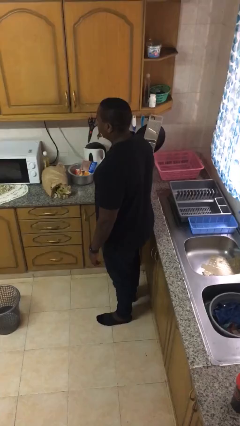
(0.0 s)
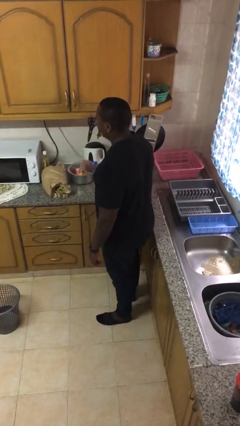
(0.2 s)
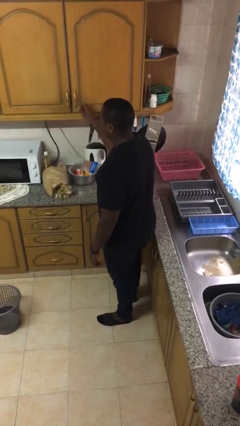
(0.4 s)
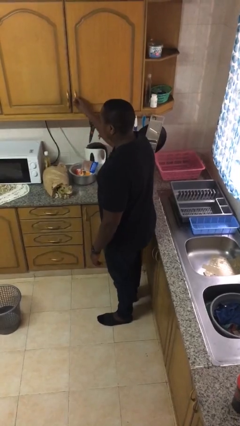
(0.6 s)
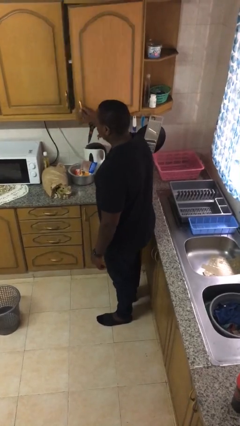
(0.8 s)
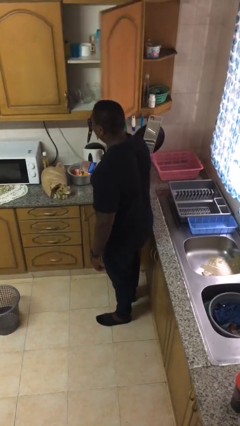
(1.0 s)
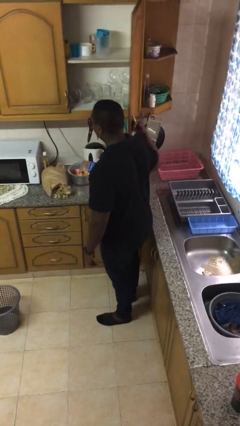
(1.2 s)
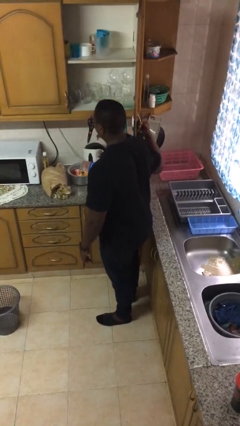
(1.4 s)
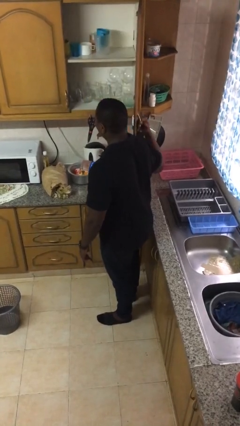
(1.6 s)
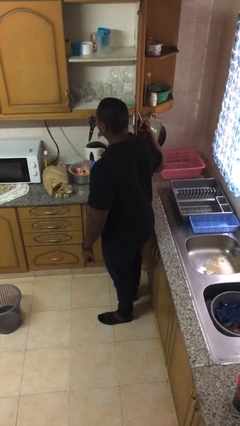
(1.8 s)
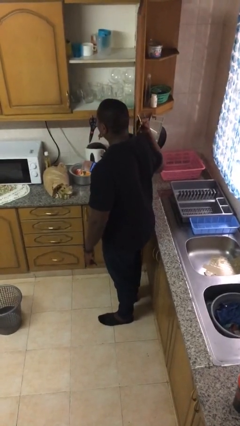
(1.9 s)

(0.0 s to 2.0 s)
person opens cabinet

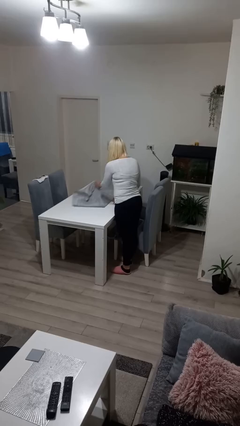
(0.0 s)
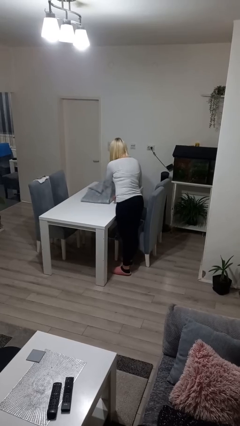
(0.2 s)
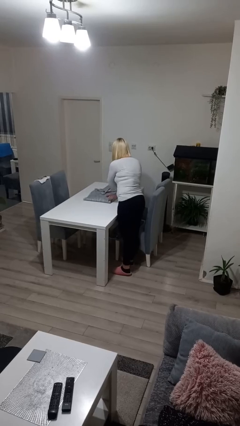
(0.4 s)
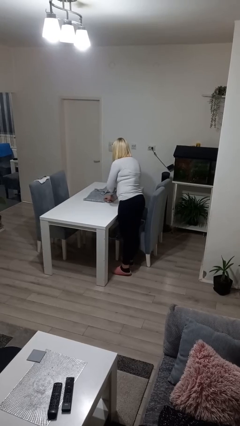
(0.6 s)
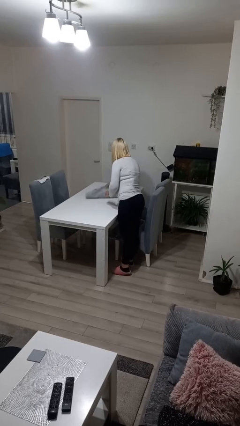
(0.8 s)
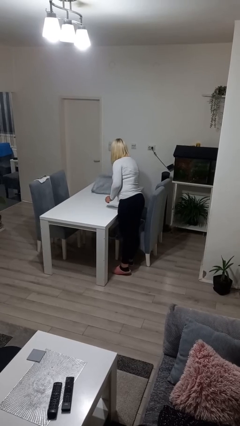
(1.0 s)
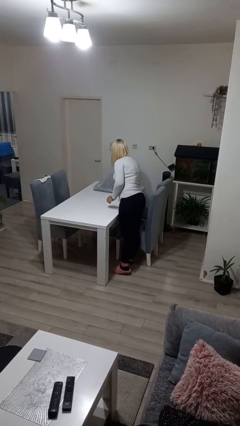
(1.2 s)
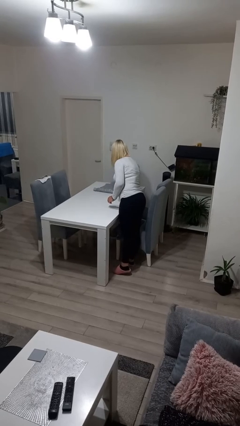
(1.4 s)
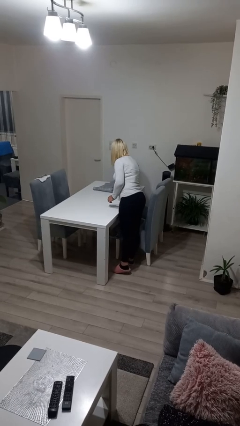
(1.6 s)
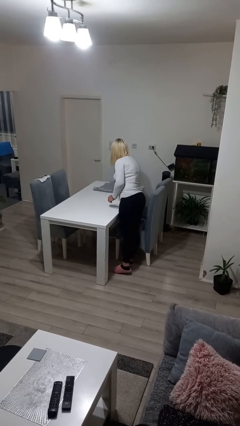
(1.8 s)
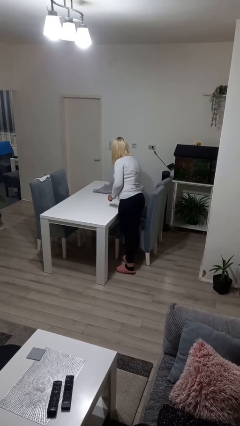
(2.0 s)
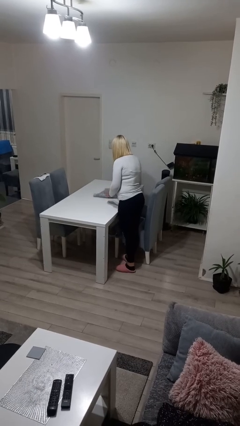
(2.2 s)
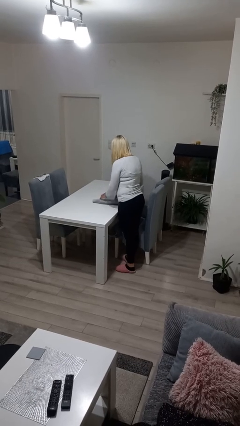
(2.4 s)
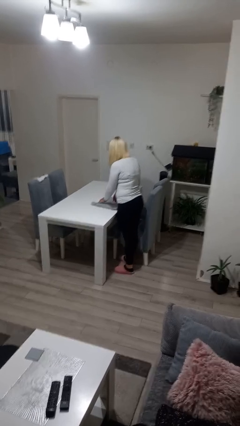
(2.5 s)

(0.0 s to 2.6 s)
person folds tablecloth

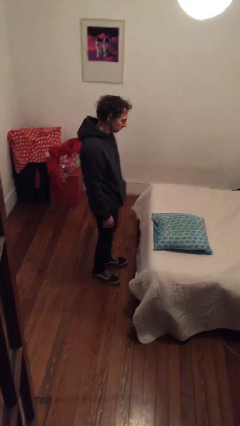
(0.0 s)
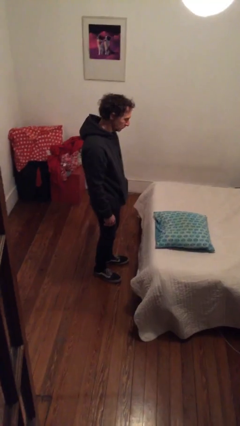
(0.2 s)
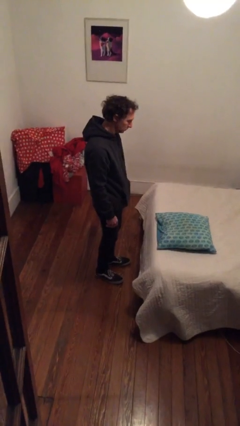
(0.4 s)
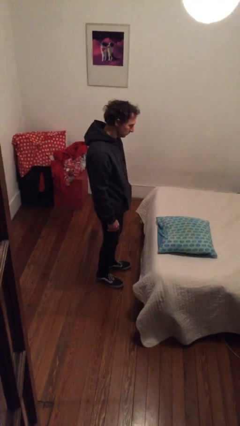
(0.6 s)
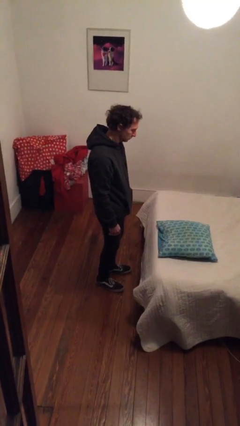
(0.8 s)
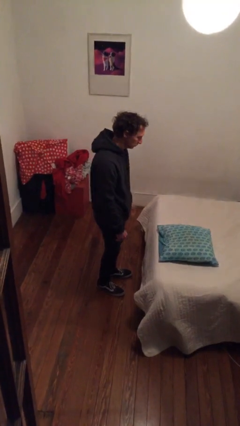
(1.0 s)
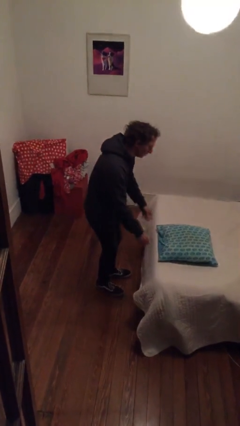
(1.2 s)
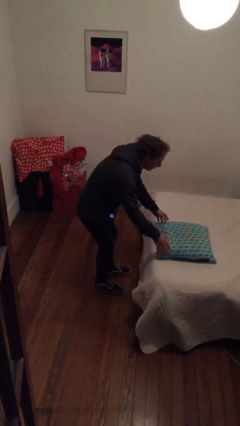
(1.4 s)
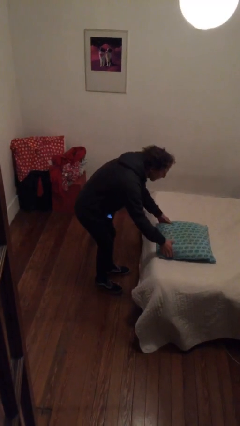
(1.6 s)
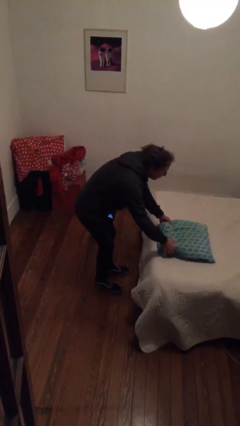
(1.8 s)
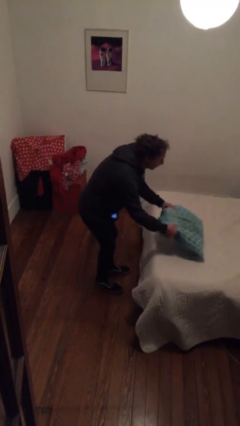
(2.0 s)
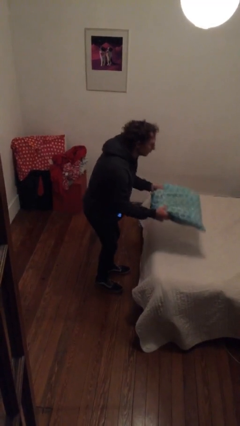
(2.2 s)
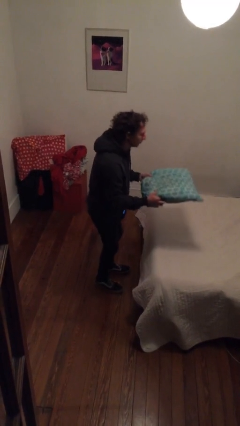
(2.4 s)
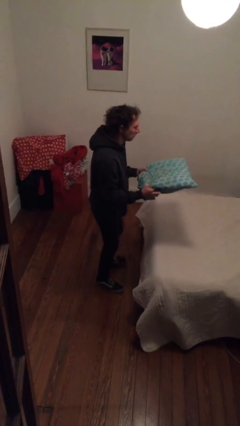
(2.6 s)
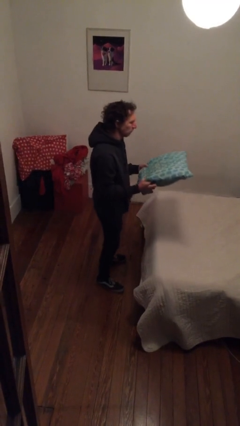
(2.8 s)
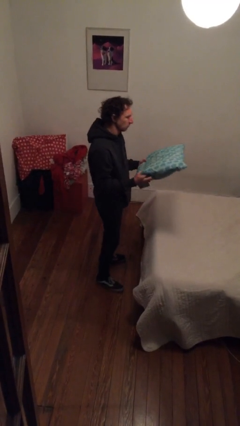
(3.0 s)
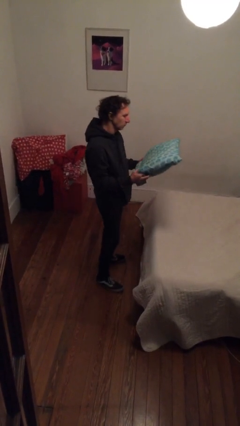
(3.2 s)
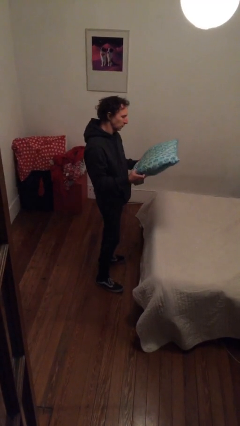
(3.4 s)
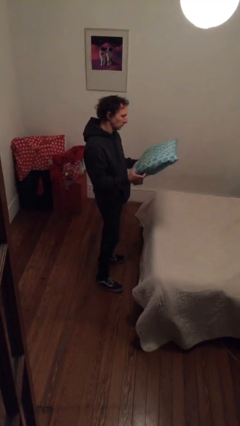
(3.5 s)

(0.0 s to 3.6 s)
person picks up object from bed

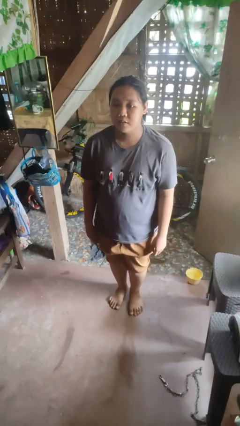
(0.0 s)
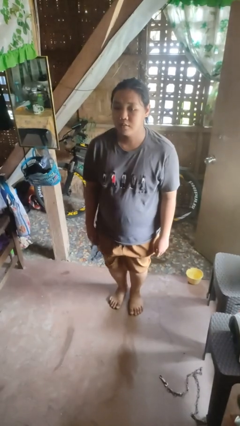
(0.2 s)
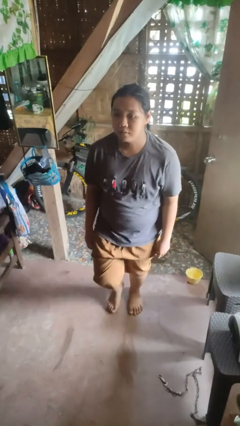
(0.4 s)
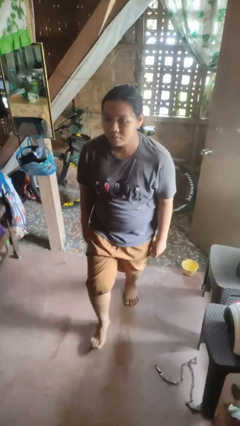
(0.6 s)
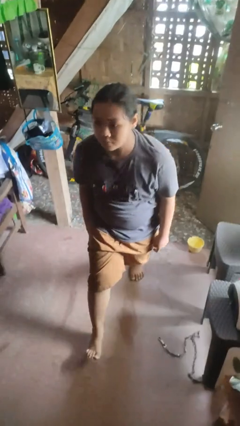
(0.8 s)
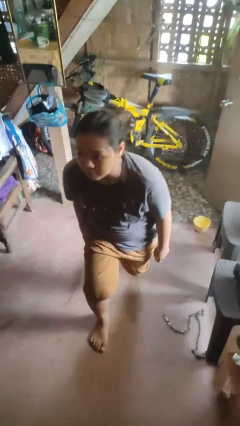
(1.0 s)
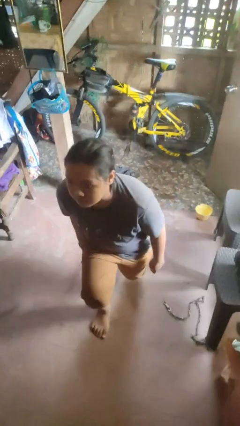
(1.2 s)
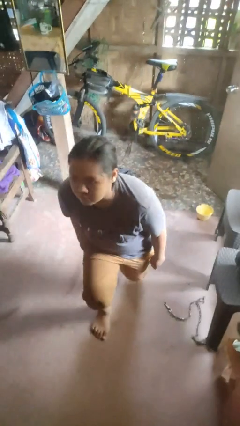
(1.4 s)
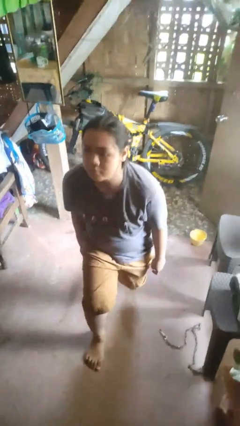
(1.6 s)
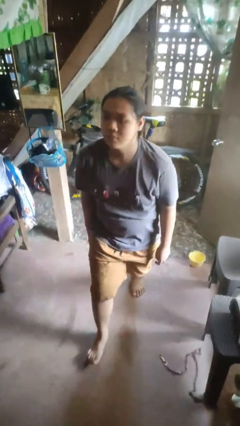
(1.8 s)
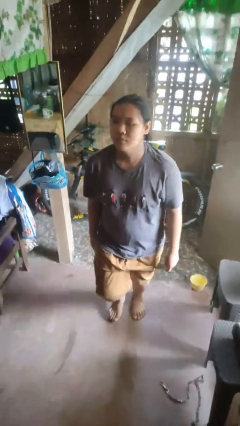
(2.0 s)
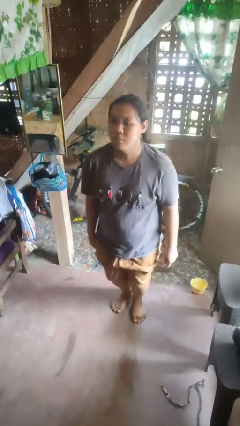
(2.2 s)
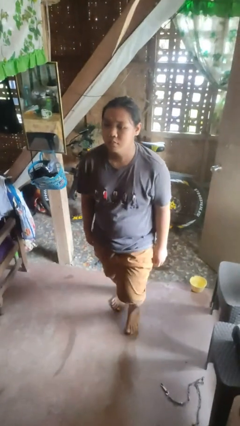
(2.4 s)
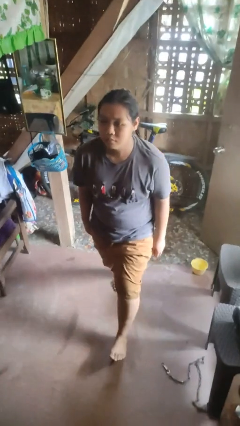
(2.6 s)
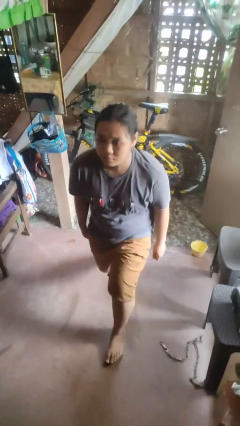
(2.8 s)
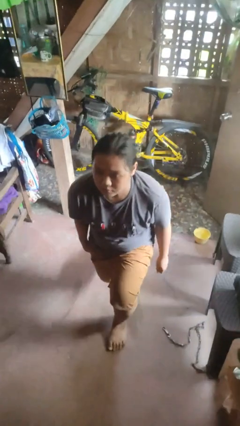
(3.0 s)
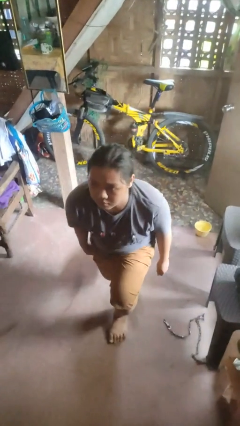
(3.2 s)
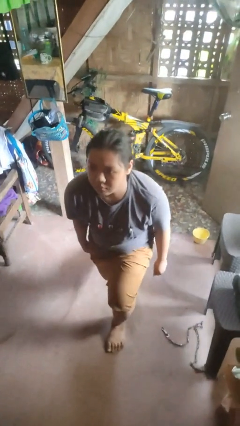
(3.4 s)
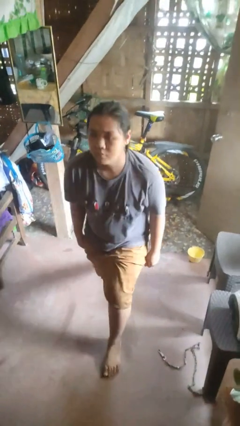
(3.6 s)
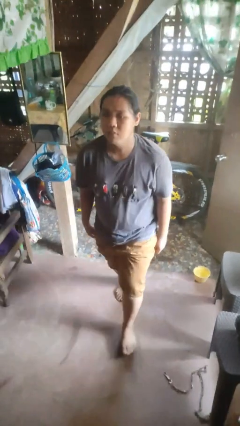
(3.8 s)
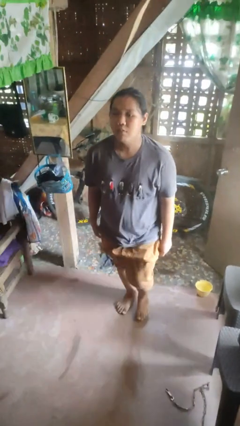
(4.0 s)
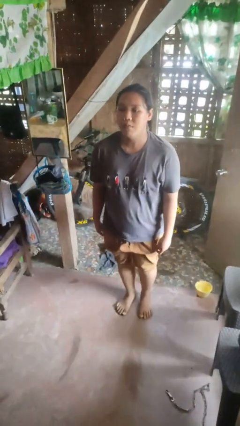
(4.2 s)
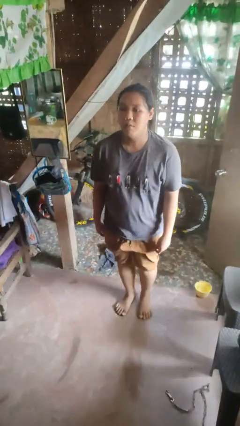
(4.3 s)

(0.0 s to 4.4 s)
person exercises with lunges

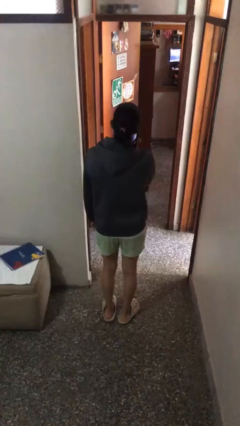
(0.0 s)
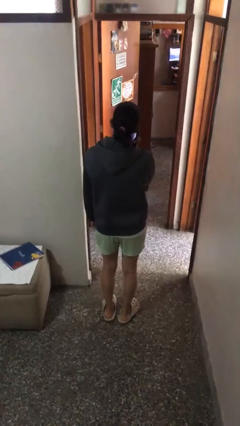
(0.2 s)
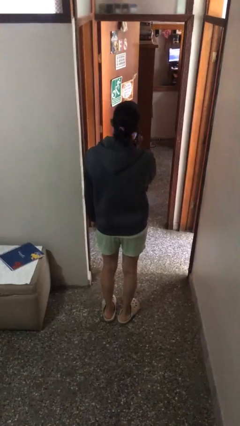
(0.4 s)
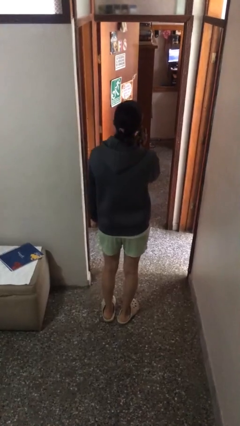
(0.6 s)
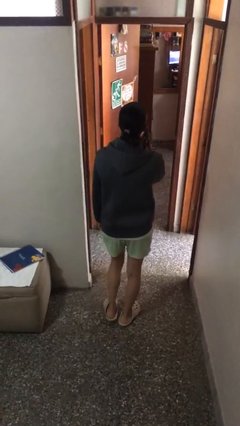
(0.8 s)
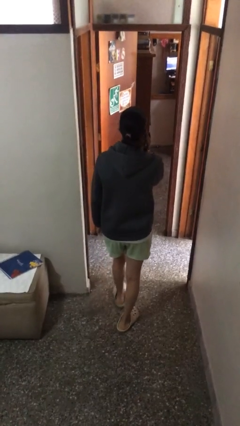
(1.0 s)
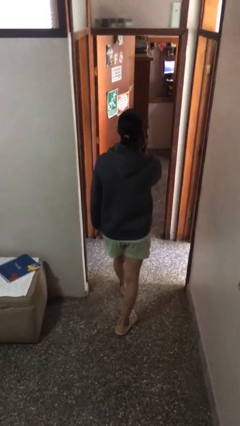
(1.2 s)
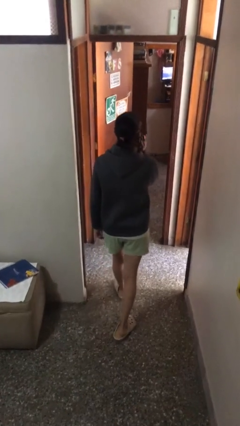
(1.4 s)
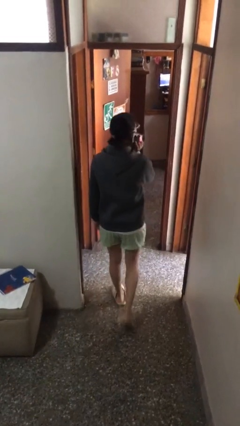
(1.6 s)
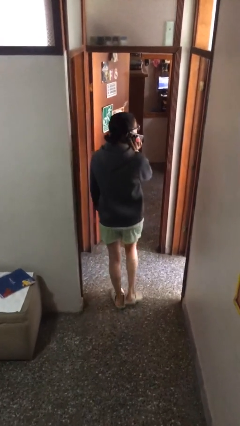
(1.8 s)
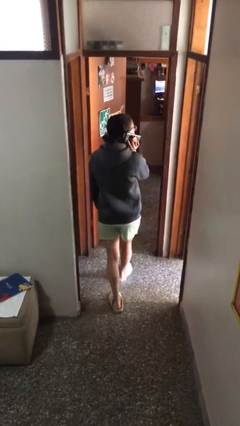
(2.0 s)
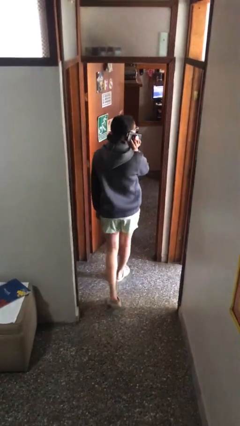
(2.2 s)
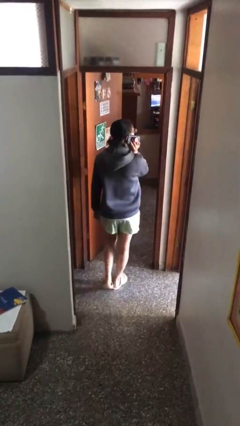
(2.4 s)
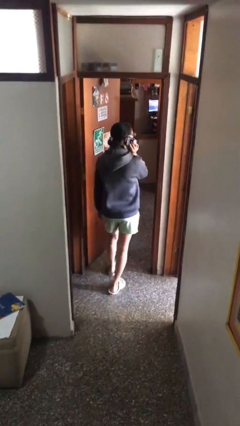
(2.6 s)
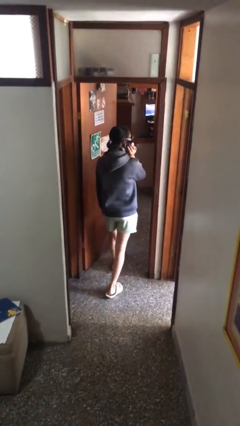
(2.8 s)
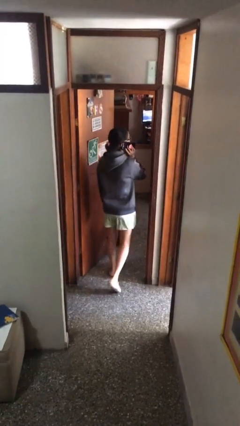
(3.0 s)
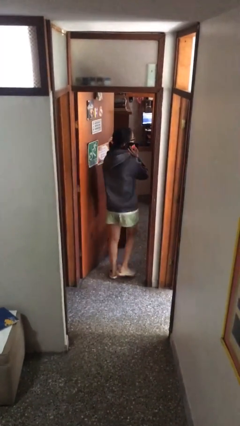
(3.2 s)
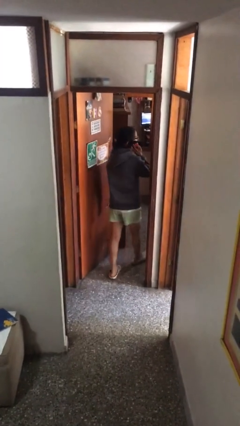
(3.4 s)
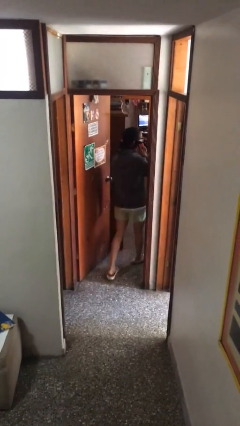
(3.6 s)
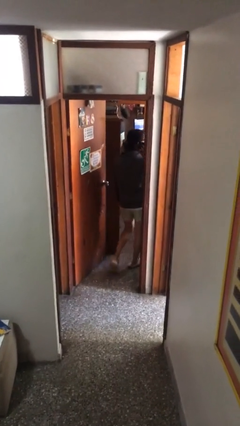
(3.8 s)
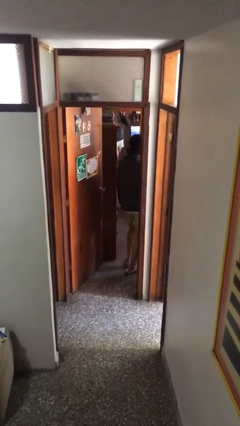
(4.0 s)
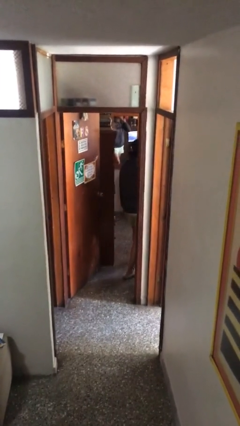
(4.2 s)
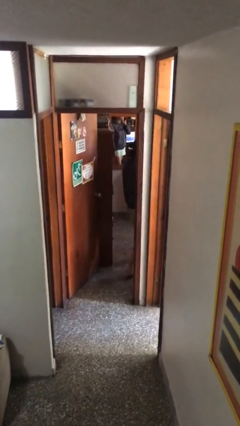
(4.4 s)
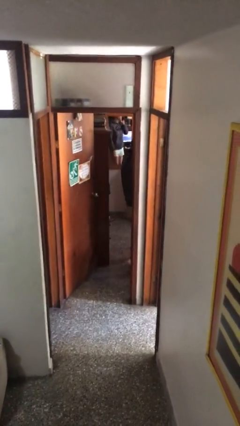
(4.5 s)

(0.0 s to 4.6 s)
person exits scene through structure

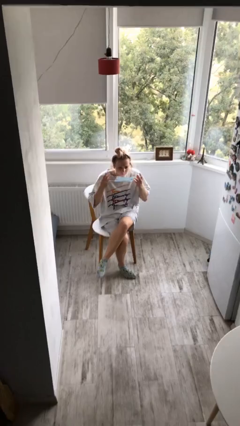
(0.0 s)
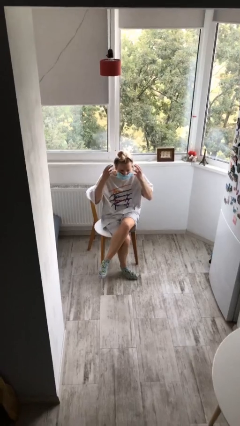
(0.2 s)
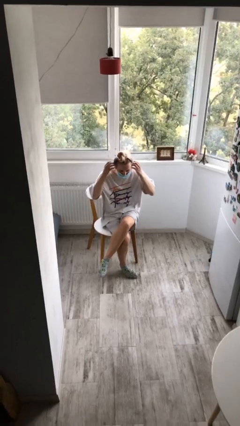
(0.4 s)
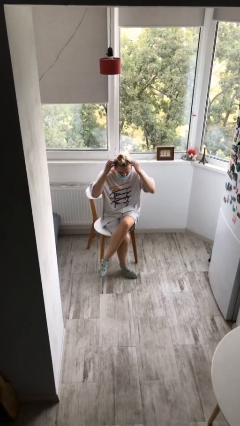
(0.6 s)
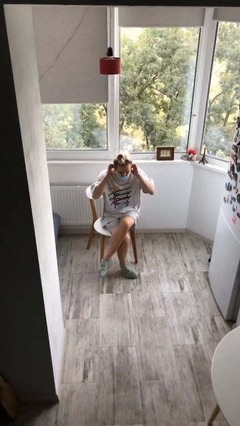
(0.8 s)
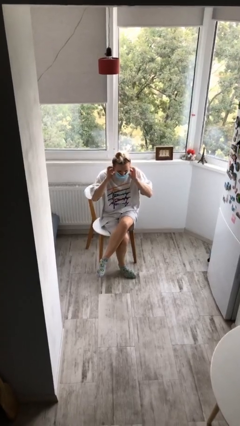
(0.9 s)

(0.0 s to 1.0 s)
person puts on facemask
